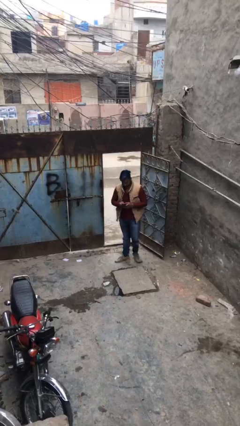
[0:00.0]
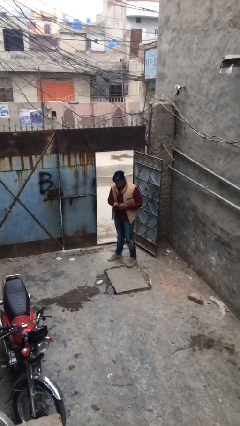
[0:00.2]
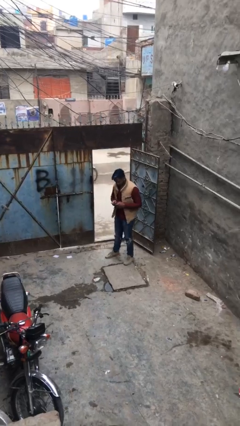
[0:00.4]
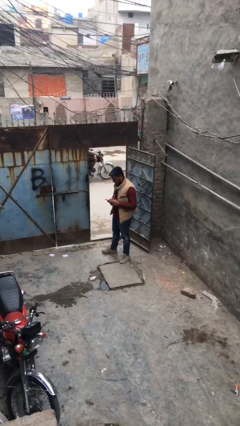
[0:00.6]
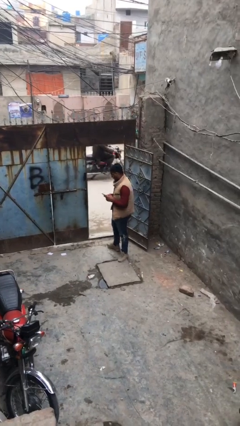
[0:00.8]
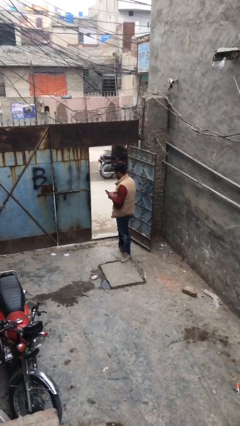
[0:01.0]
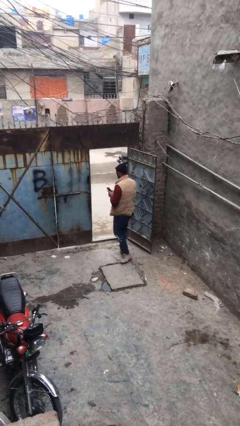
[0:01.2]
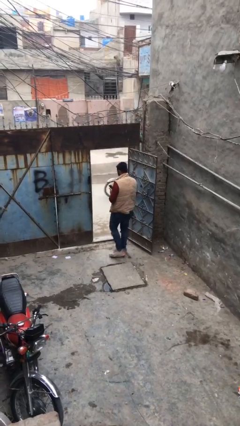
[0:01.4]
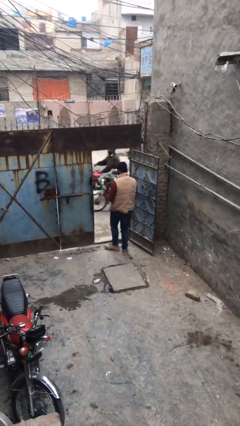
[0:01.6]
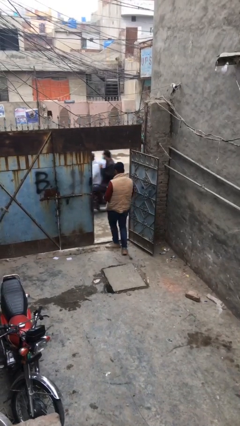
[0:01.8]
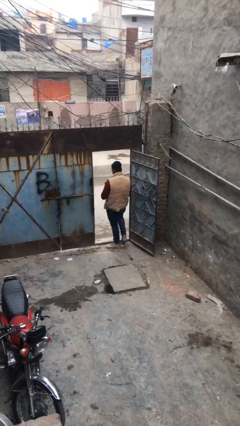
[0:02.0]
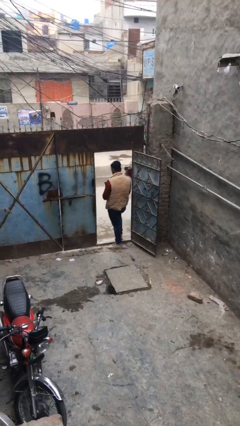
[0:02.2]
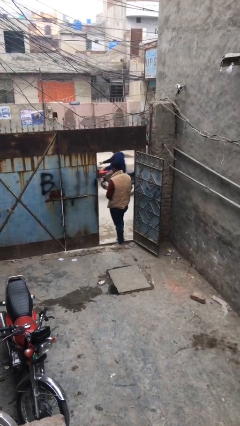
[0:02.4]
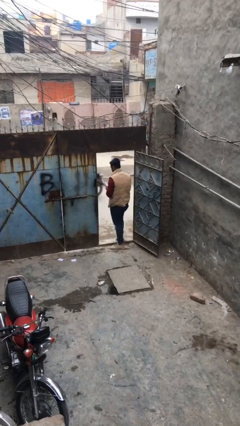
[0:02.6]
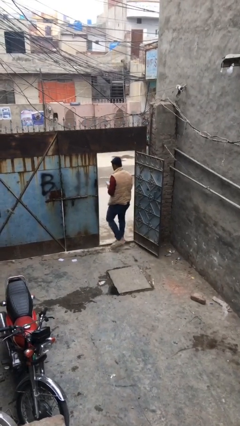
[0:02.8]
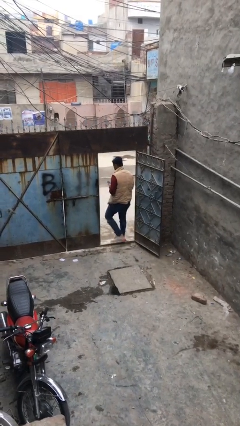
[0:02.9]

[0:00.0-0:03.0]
person exits scene through structure

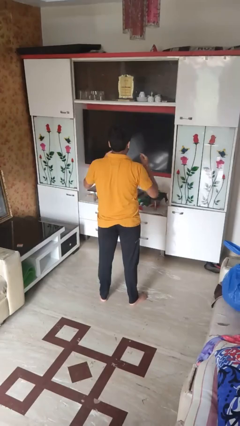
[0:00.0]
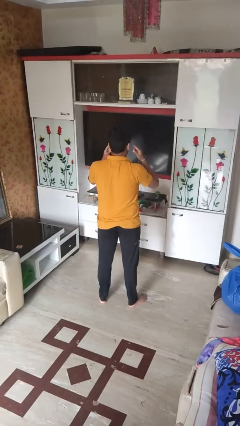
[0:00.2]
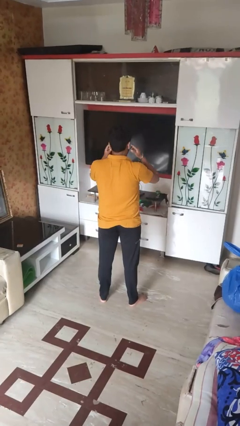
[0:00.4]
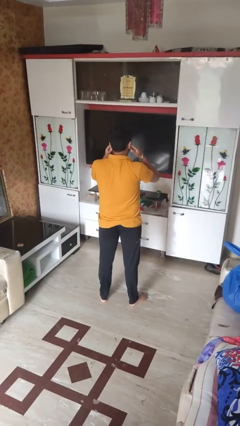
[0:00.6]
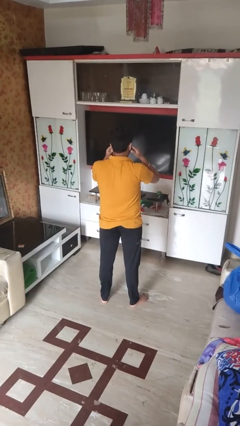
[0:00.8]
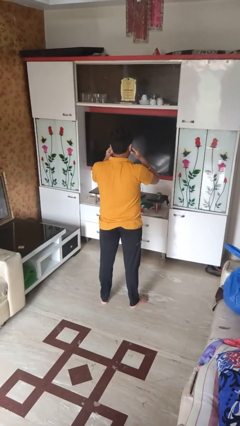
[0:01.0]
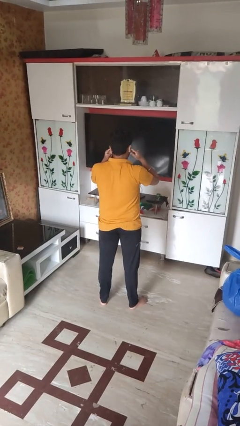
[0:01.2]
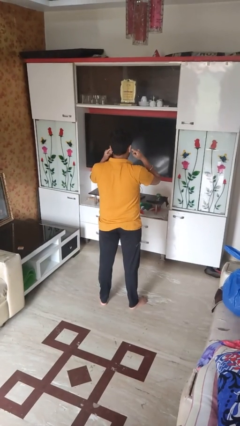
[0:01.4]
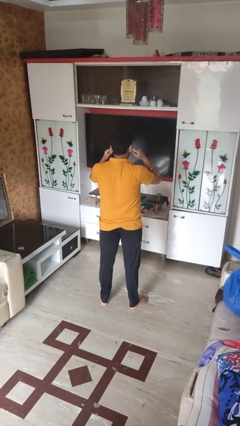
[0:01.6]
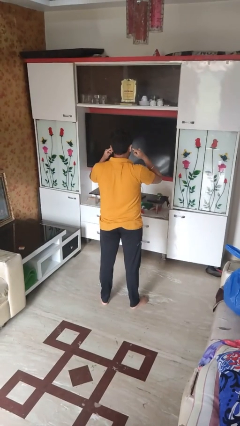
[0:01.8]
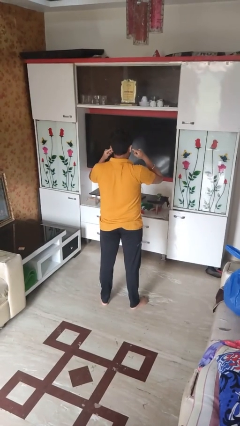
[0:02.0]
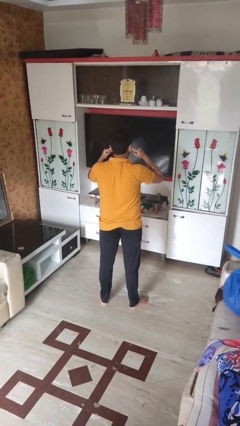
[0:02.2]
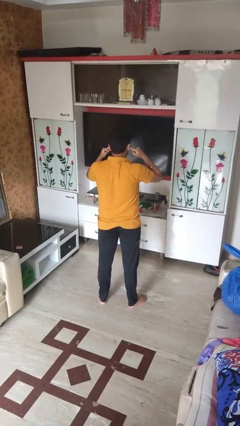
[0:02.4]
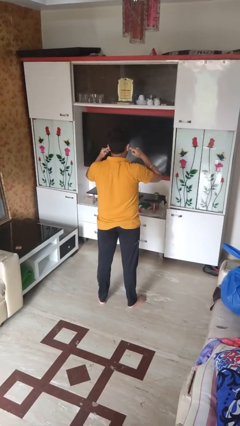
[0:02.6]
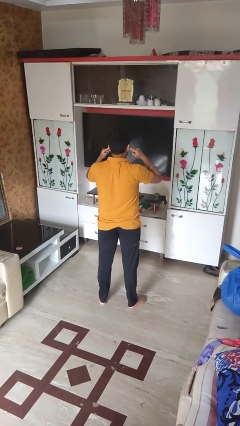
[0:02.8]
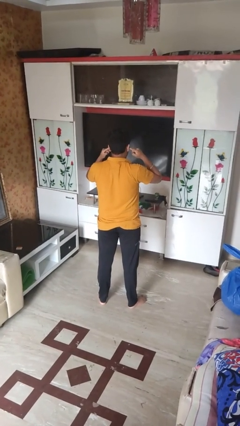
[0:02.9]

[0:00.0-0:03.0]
person puts fingers in ear

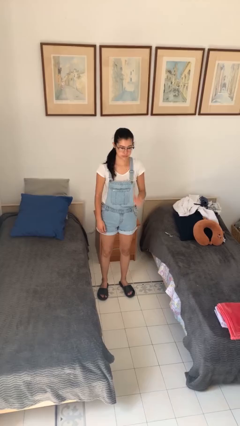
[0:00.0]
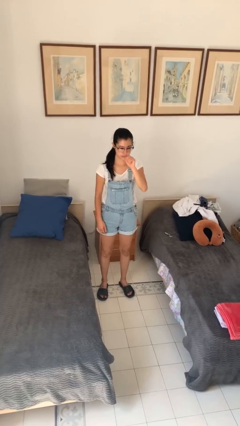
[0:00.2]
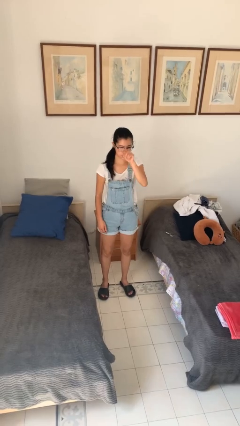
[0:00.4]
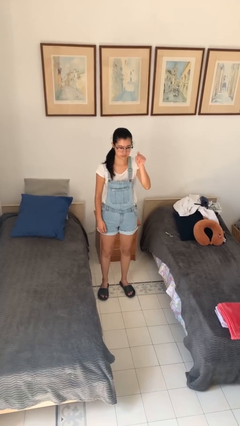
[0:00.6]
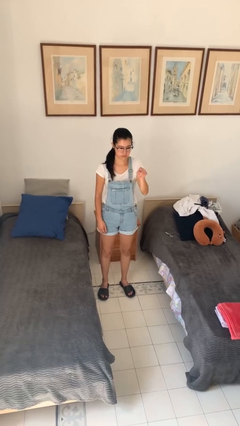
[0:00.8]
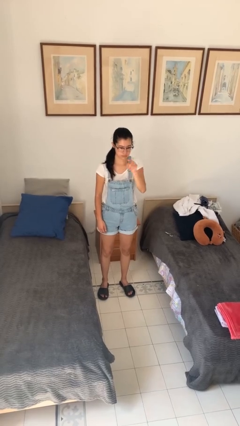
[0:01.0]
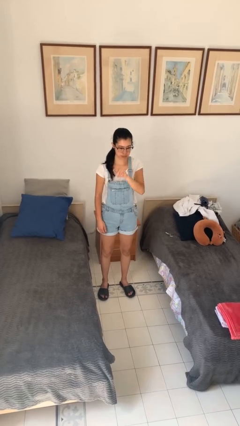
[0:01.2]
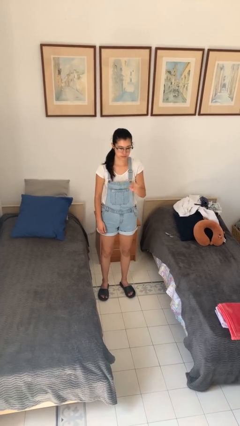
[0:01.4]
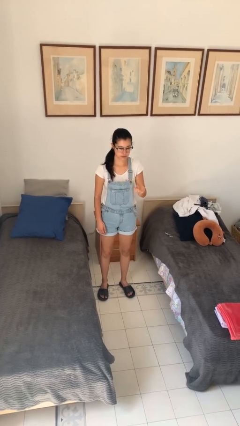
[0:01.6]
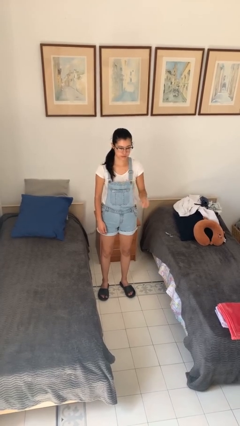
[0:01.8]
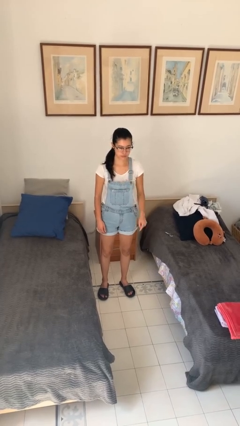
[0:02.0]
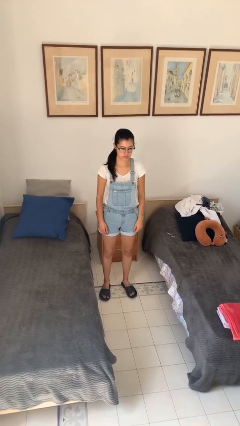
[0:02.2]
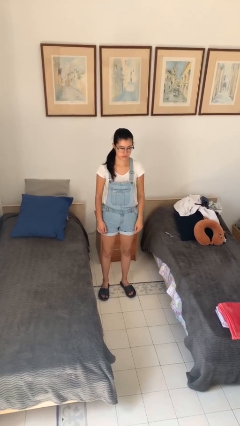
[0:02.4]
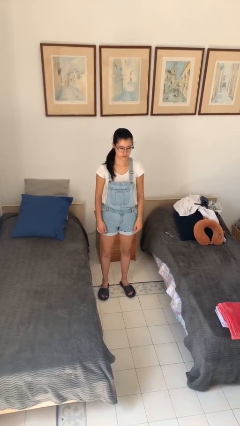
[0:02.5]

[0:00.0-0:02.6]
person gestures number five

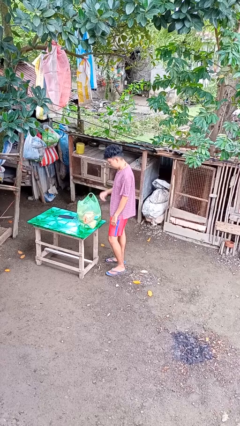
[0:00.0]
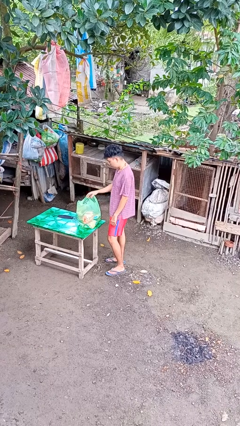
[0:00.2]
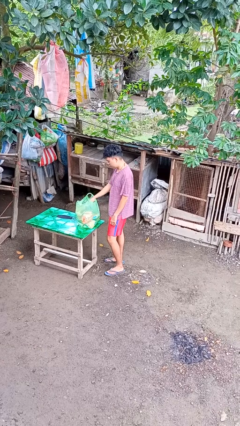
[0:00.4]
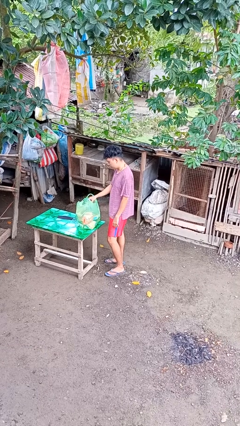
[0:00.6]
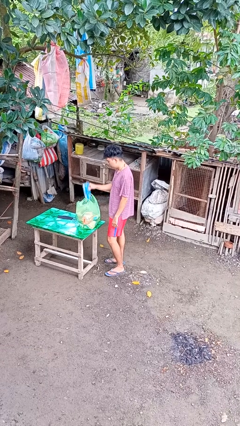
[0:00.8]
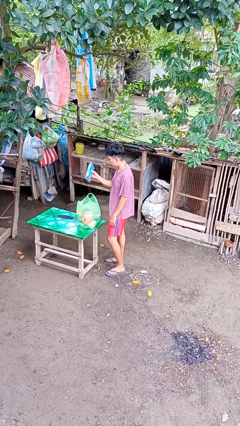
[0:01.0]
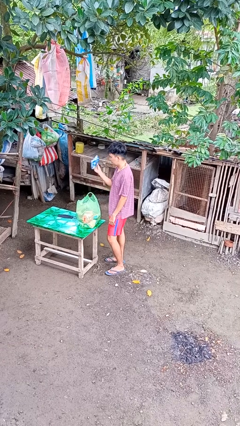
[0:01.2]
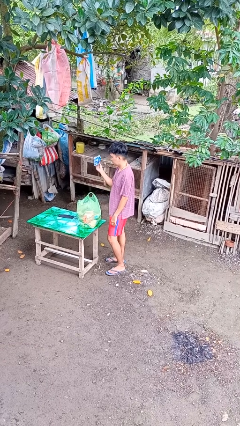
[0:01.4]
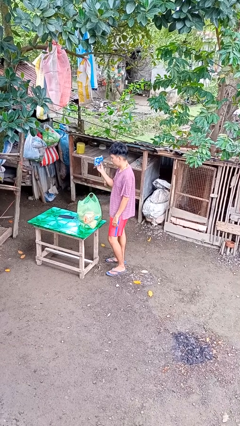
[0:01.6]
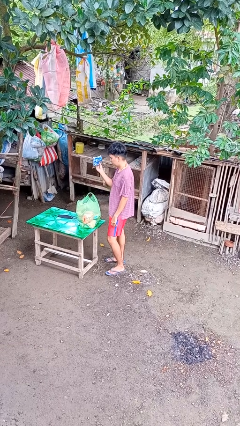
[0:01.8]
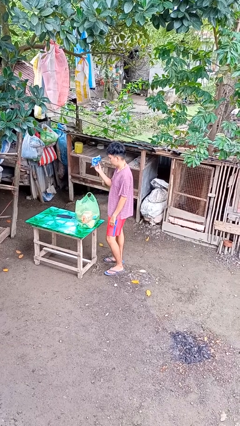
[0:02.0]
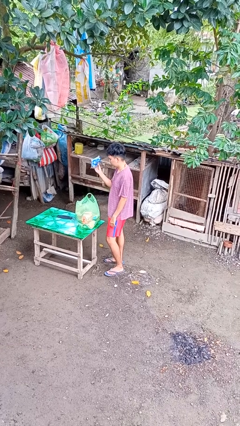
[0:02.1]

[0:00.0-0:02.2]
person takes object from bag

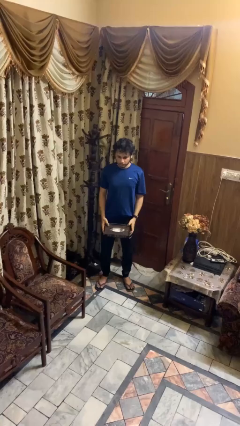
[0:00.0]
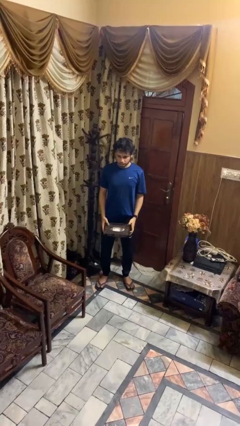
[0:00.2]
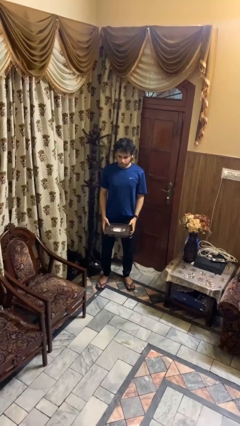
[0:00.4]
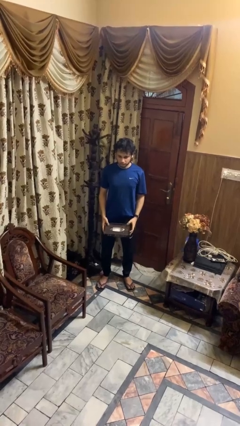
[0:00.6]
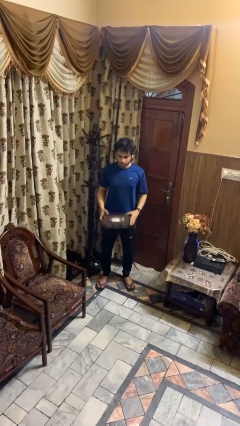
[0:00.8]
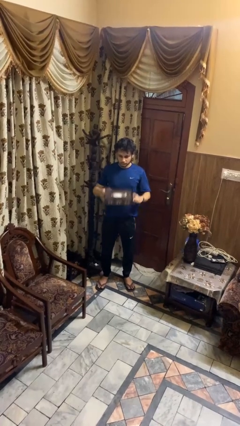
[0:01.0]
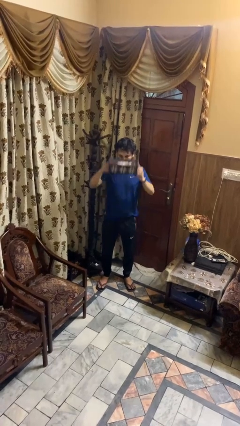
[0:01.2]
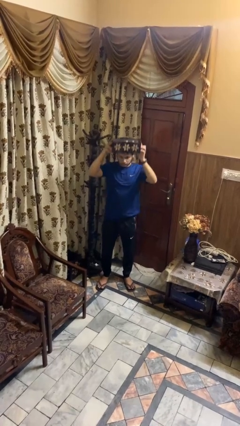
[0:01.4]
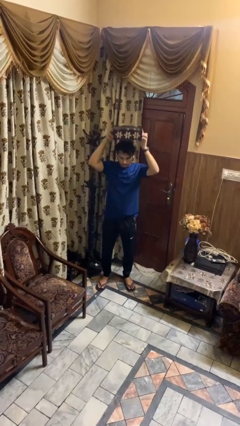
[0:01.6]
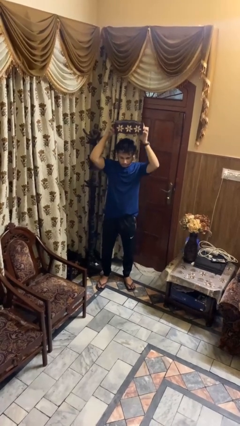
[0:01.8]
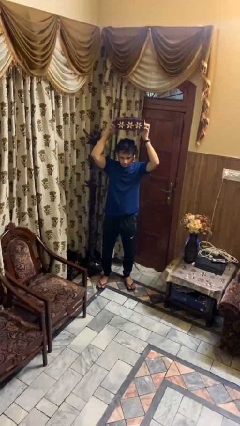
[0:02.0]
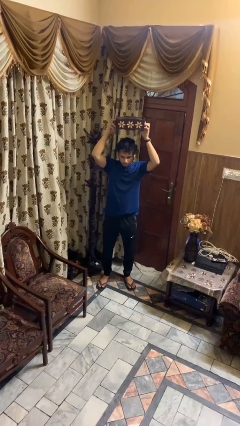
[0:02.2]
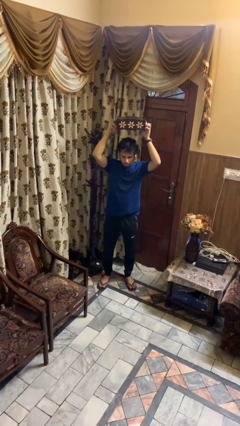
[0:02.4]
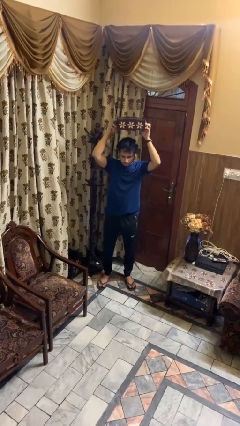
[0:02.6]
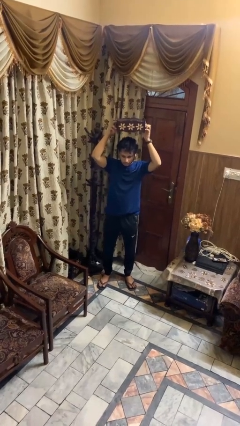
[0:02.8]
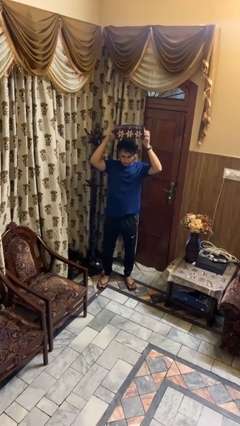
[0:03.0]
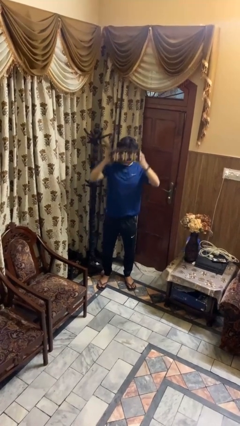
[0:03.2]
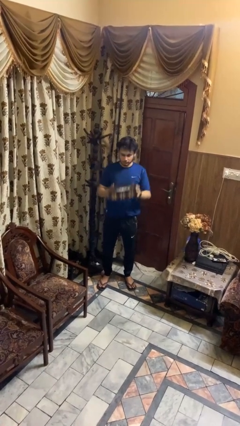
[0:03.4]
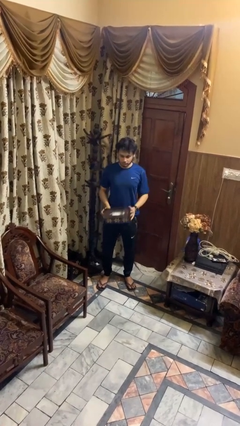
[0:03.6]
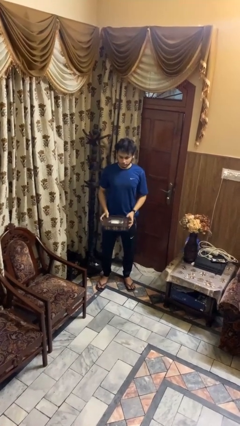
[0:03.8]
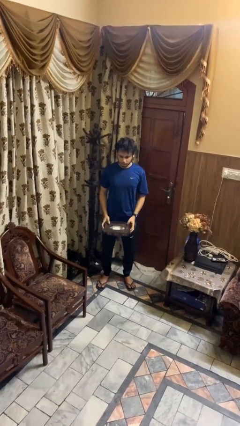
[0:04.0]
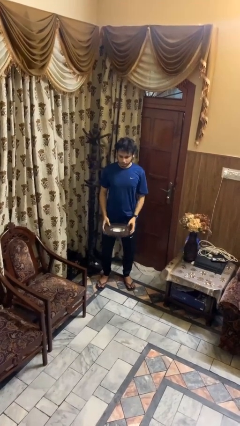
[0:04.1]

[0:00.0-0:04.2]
person holds object above head

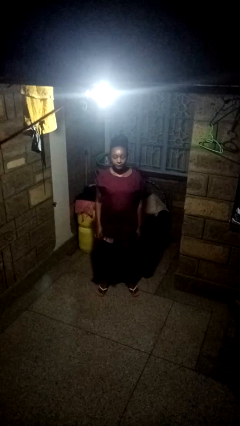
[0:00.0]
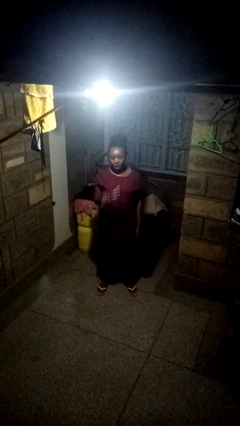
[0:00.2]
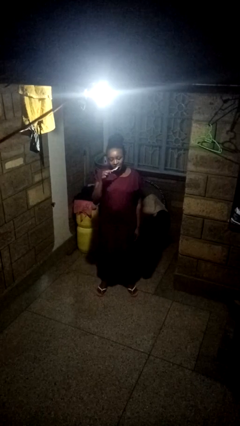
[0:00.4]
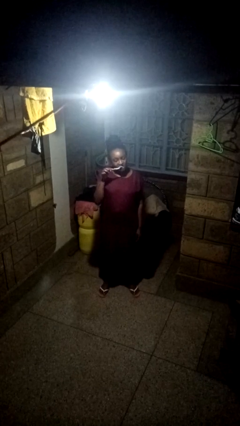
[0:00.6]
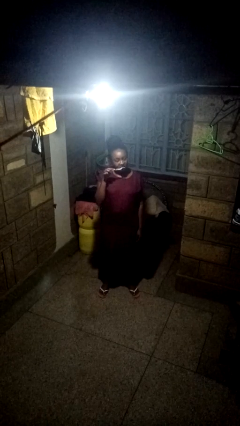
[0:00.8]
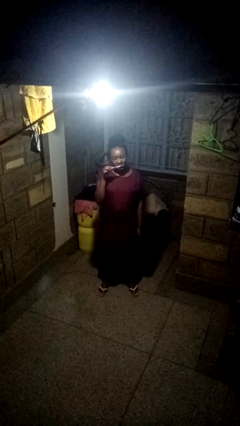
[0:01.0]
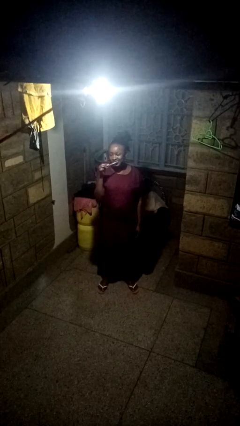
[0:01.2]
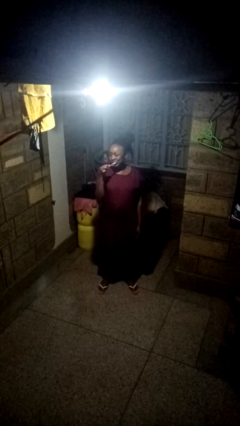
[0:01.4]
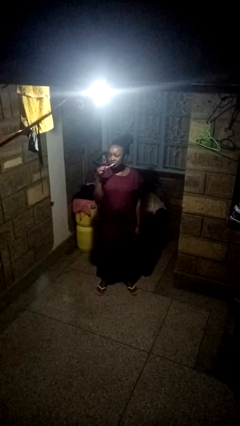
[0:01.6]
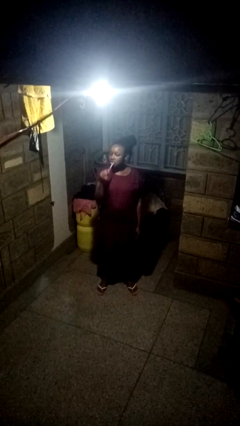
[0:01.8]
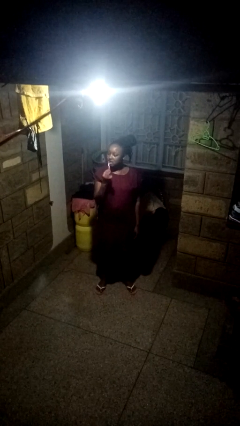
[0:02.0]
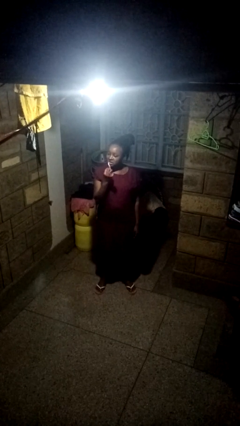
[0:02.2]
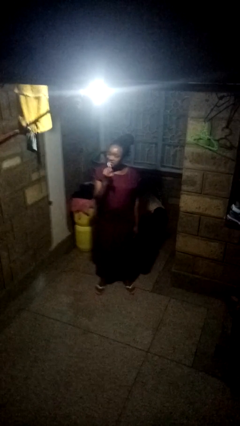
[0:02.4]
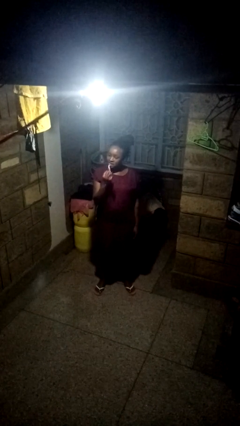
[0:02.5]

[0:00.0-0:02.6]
person brushes teeth
